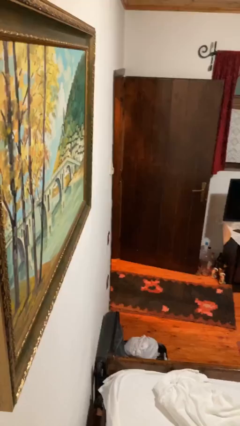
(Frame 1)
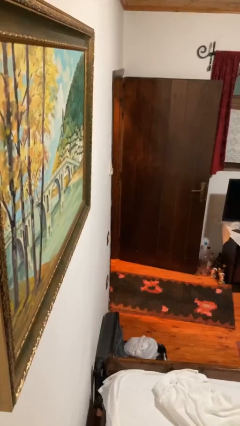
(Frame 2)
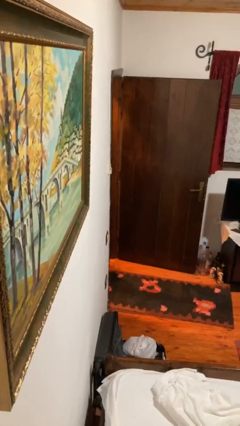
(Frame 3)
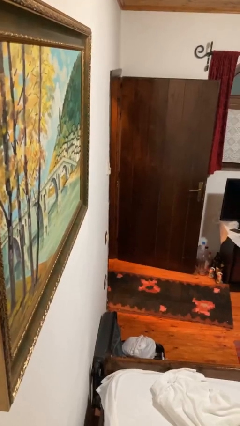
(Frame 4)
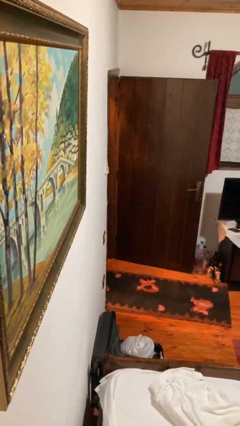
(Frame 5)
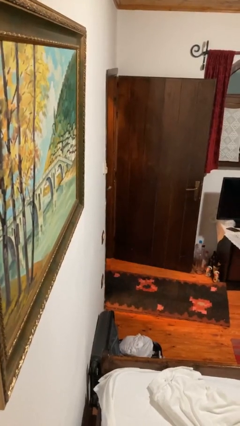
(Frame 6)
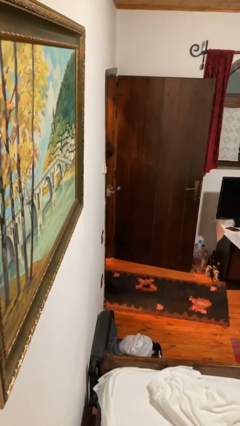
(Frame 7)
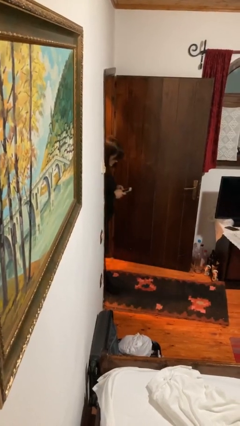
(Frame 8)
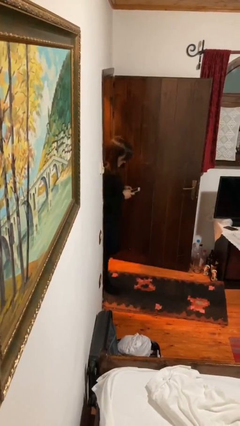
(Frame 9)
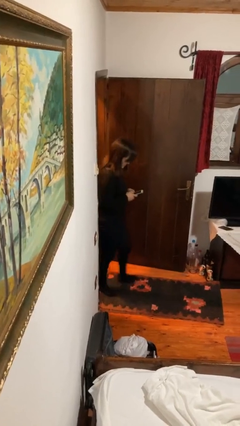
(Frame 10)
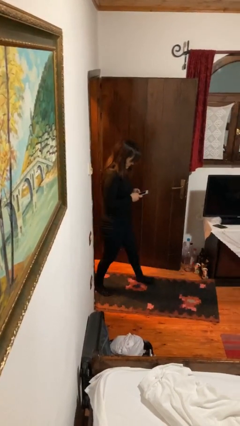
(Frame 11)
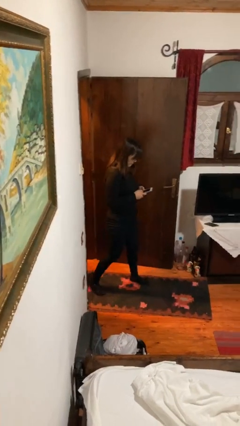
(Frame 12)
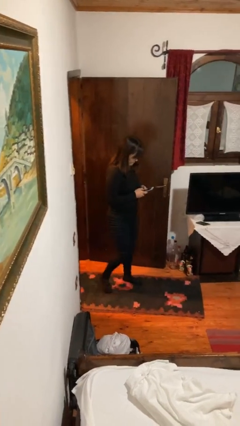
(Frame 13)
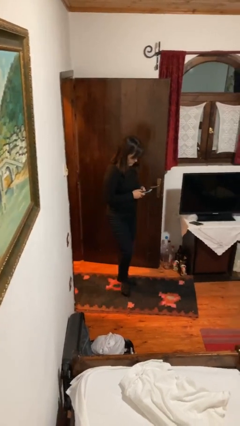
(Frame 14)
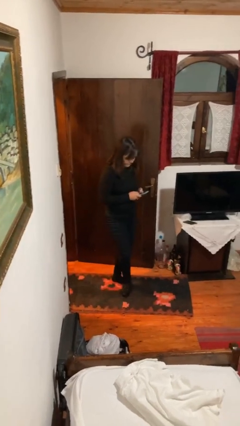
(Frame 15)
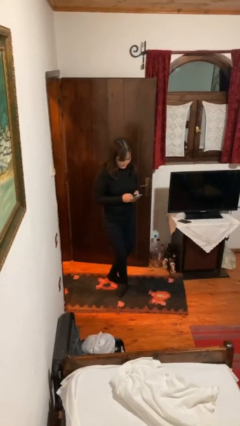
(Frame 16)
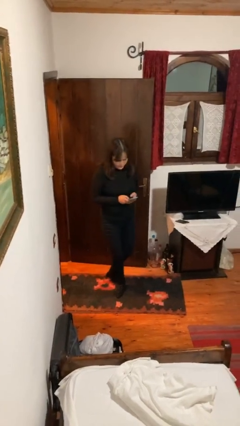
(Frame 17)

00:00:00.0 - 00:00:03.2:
person enters scene through structure

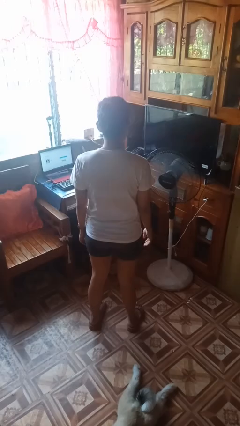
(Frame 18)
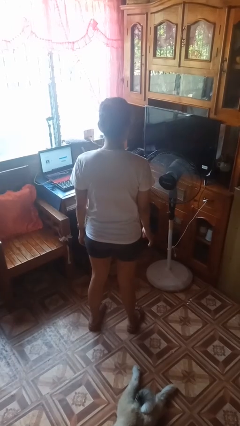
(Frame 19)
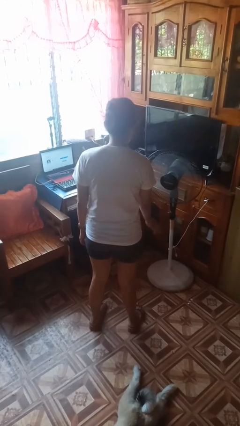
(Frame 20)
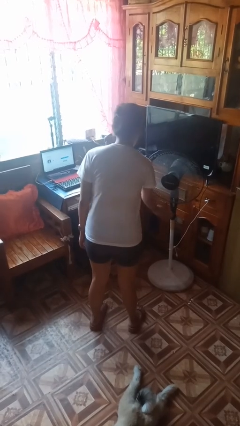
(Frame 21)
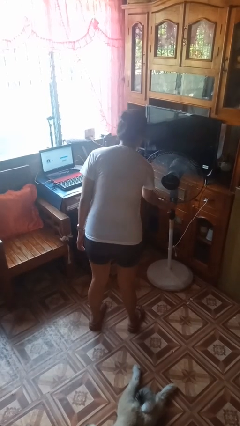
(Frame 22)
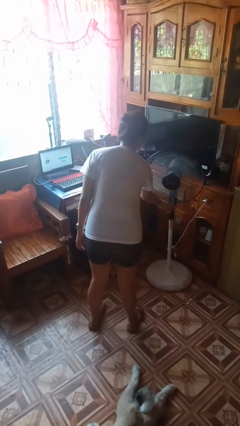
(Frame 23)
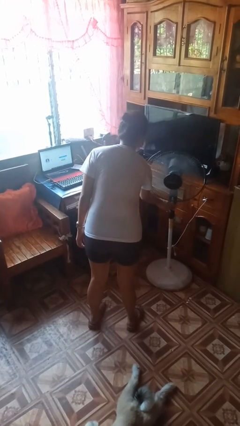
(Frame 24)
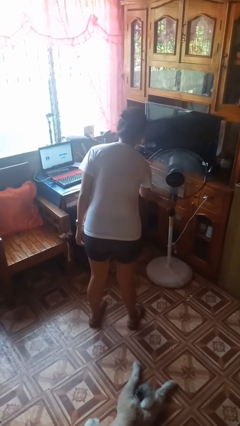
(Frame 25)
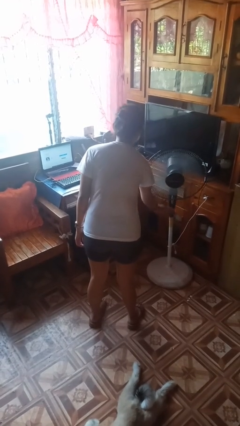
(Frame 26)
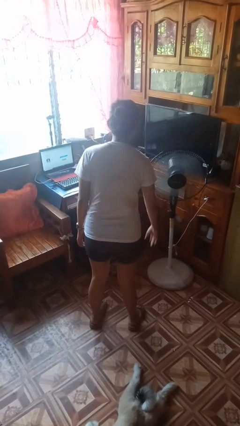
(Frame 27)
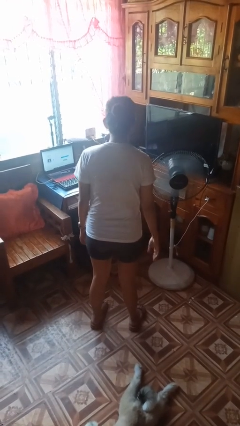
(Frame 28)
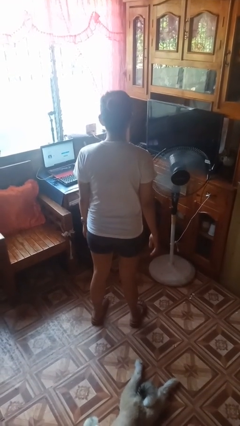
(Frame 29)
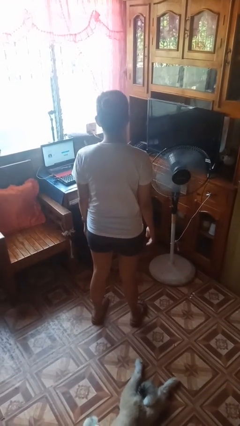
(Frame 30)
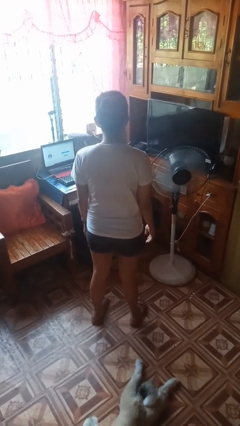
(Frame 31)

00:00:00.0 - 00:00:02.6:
person turns off fan

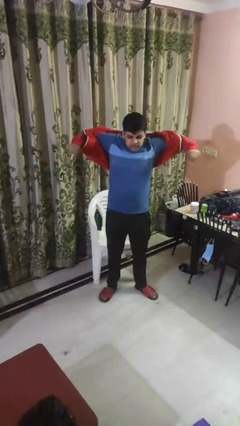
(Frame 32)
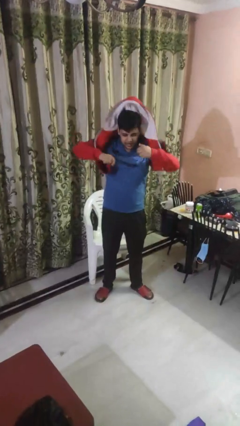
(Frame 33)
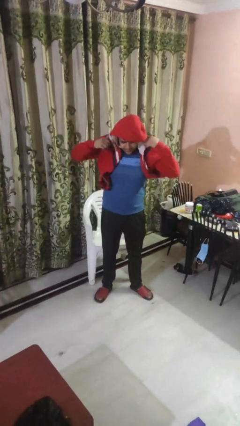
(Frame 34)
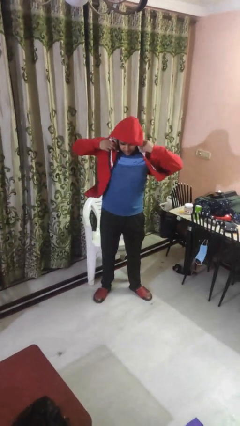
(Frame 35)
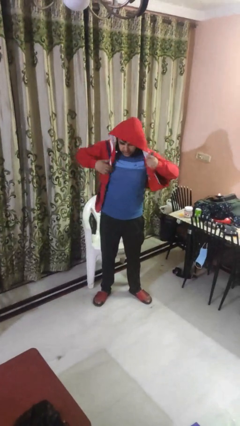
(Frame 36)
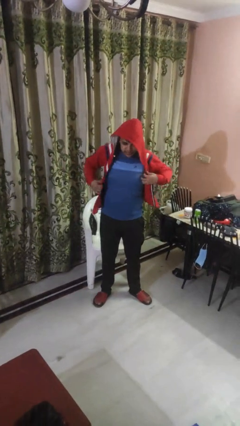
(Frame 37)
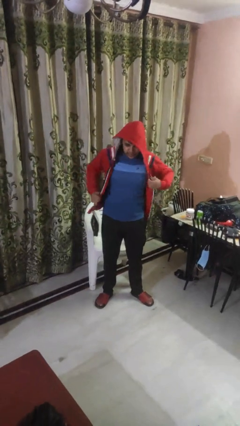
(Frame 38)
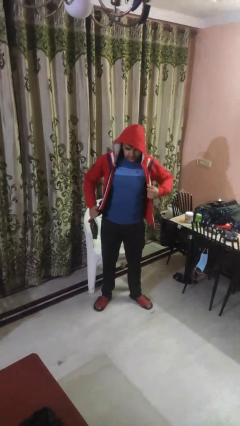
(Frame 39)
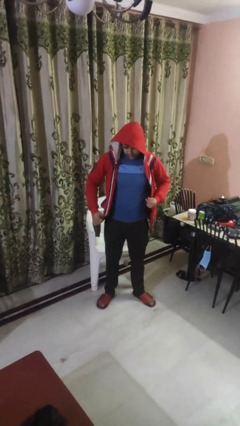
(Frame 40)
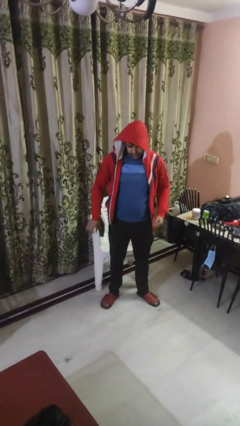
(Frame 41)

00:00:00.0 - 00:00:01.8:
person puts on hoodie

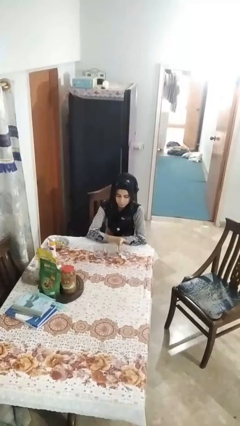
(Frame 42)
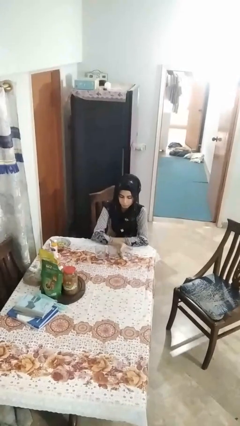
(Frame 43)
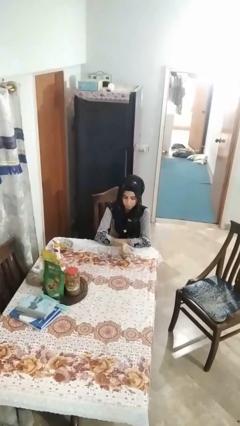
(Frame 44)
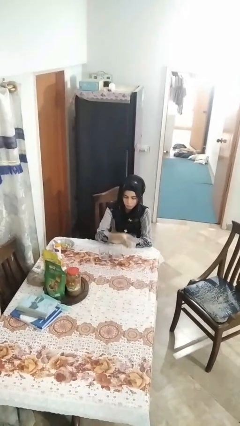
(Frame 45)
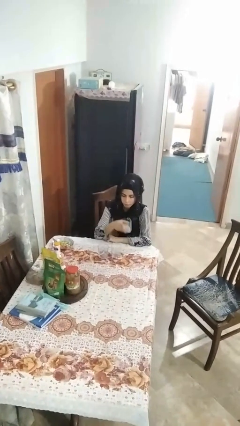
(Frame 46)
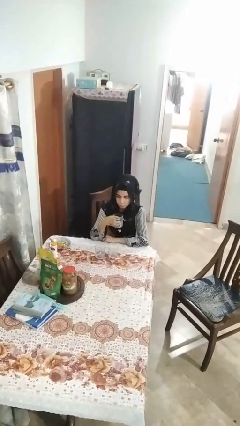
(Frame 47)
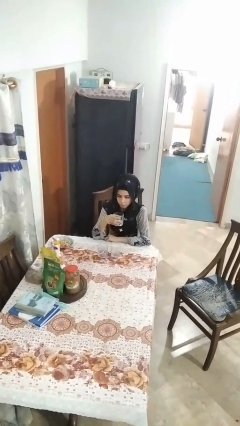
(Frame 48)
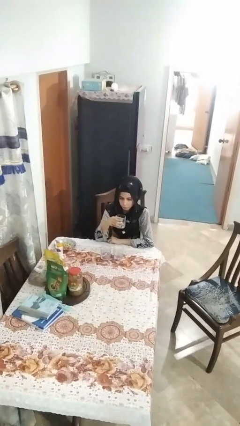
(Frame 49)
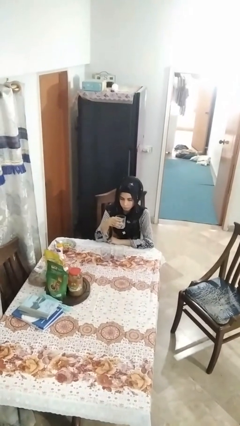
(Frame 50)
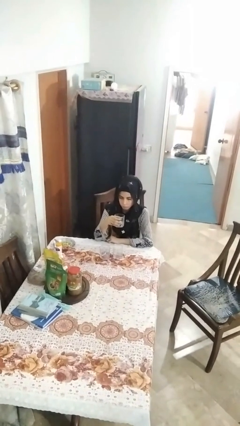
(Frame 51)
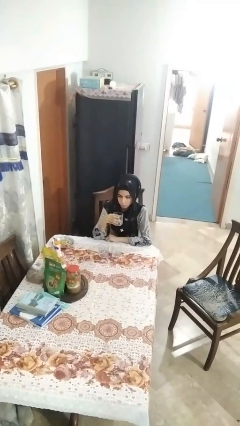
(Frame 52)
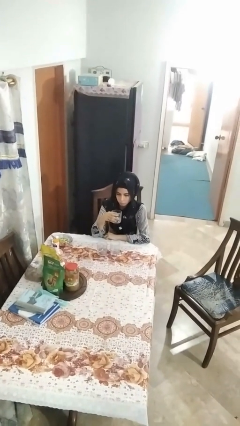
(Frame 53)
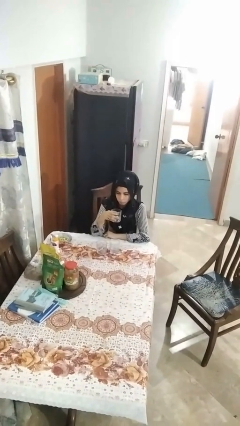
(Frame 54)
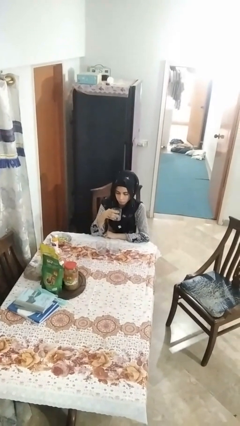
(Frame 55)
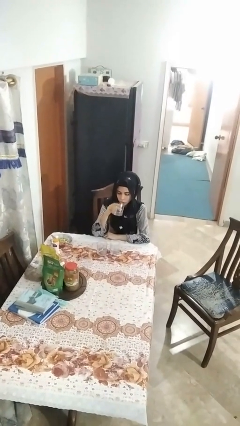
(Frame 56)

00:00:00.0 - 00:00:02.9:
person picks up object from table

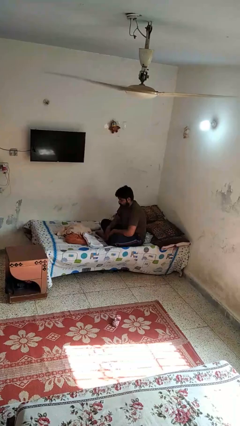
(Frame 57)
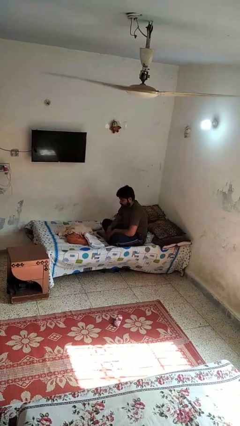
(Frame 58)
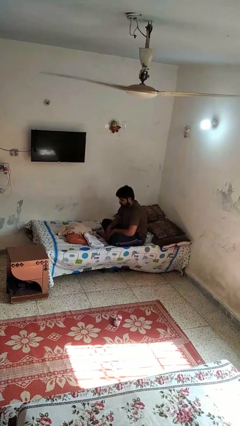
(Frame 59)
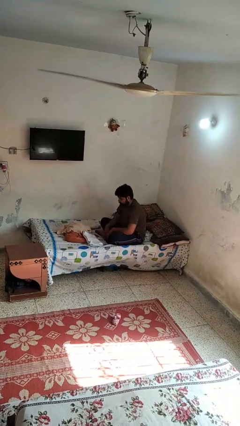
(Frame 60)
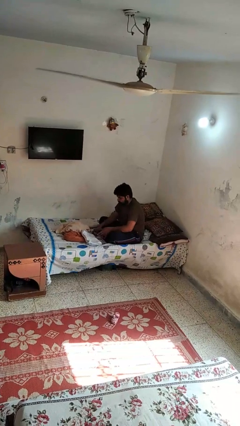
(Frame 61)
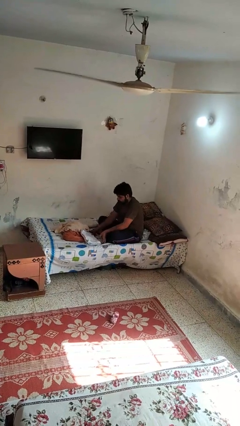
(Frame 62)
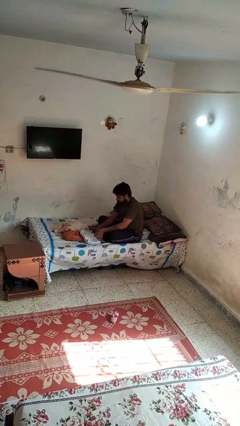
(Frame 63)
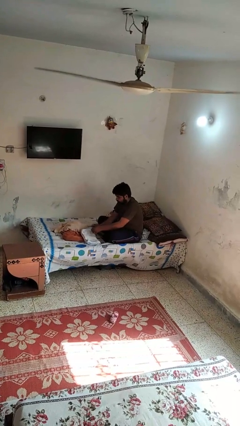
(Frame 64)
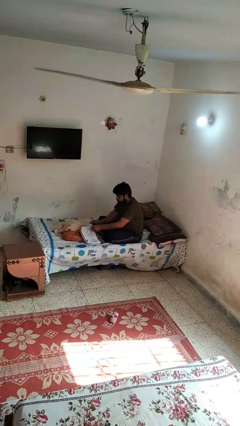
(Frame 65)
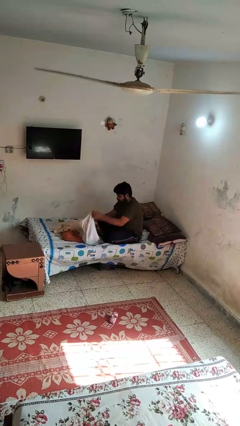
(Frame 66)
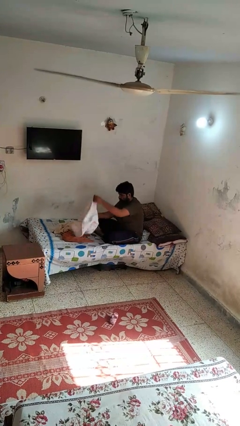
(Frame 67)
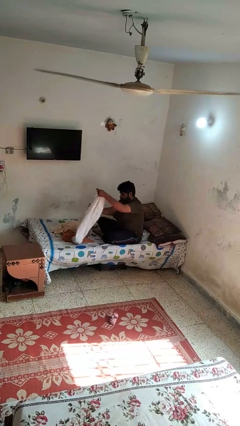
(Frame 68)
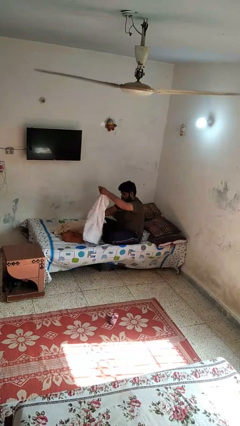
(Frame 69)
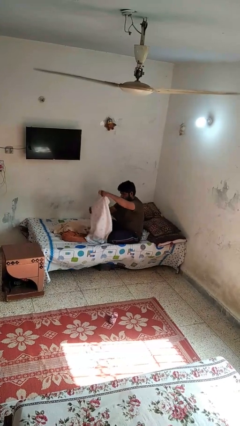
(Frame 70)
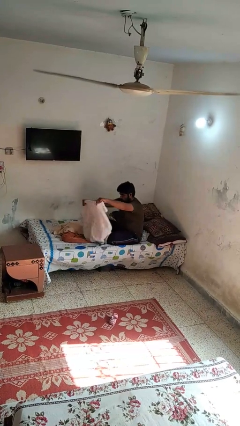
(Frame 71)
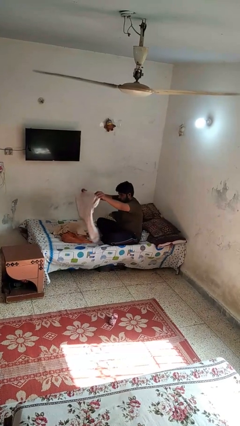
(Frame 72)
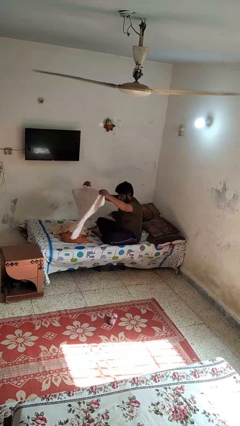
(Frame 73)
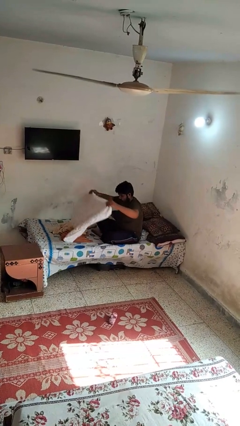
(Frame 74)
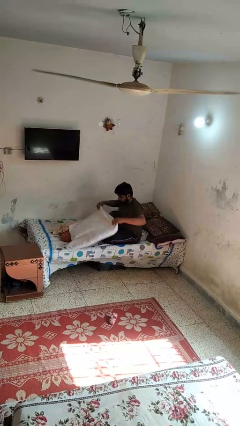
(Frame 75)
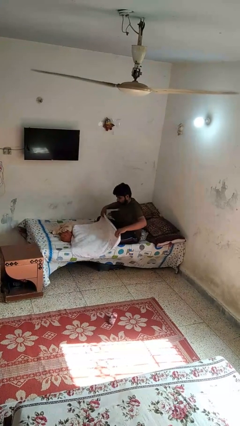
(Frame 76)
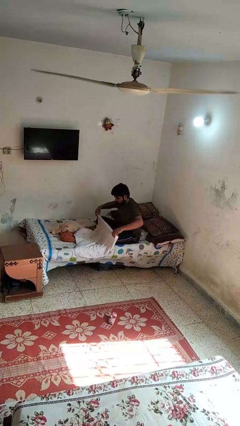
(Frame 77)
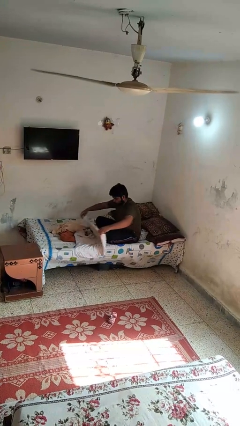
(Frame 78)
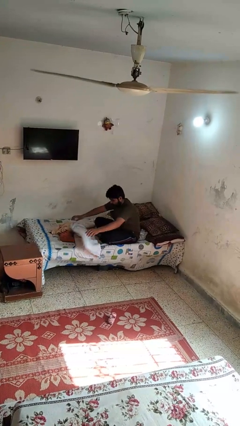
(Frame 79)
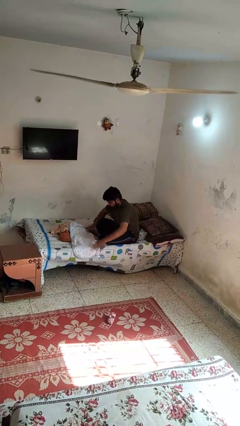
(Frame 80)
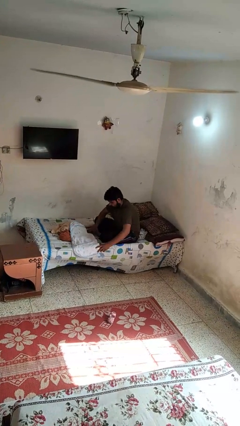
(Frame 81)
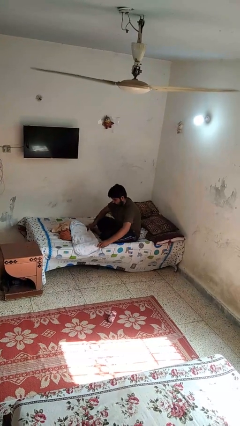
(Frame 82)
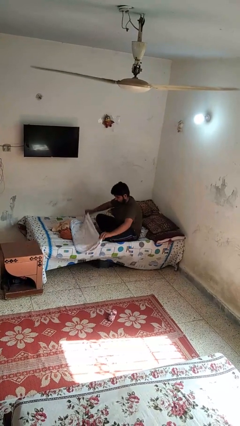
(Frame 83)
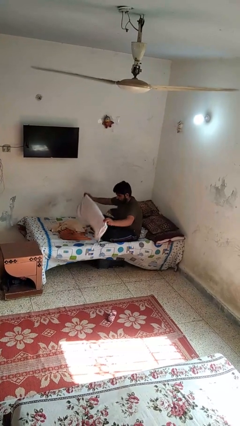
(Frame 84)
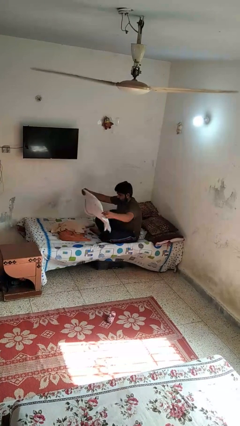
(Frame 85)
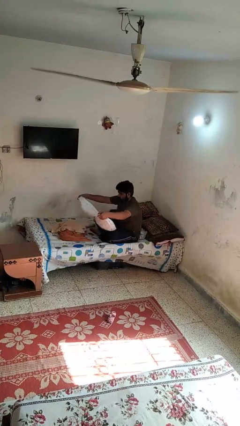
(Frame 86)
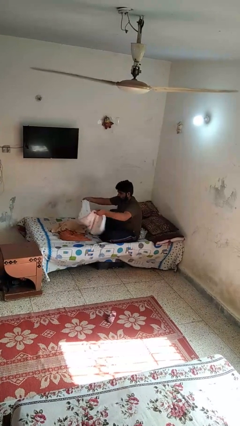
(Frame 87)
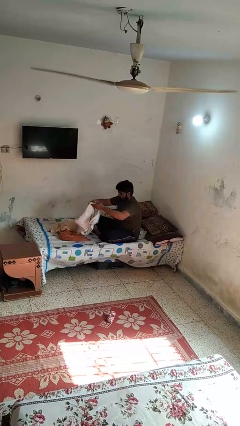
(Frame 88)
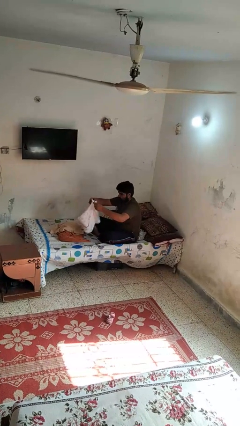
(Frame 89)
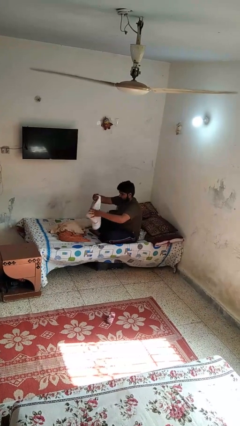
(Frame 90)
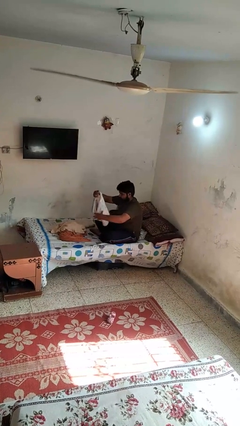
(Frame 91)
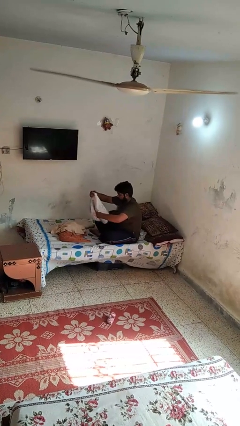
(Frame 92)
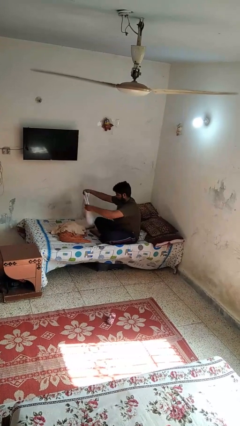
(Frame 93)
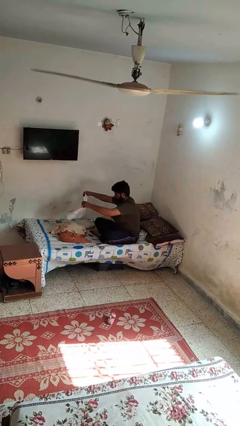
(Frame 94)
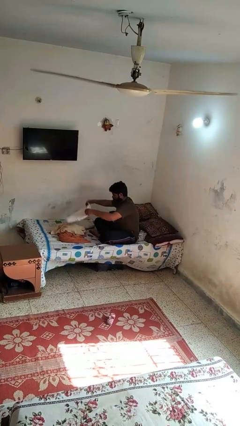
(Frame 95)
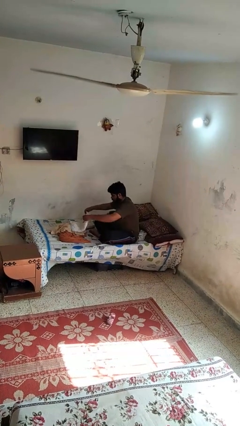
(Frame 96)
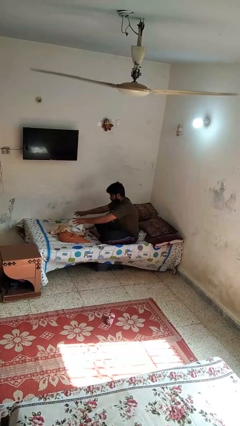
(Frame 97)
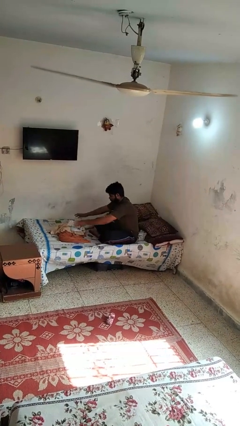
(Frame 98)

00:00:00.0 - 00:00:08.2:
person folds towel
